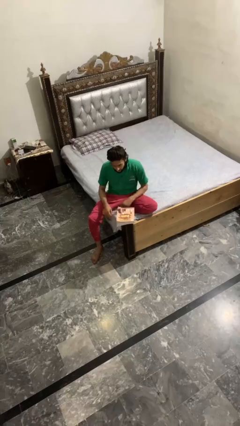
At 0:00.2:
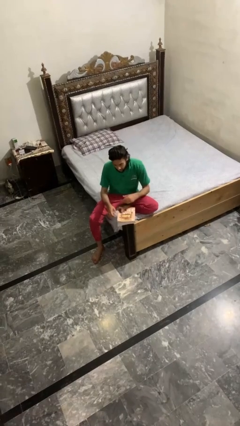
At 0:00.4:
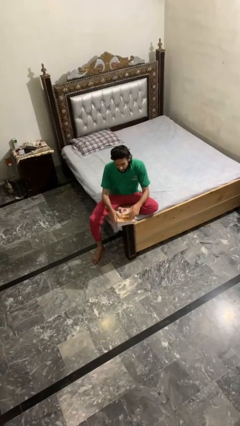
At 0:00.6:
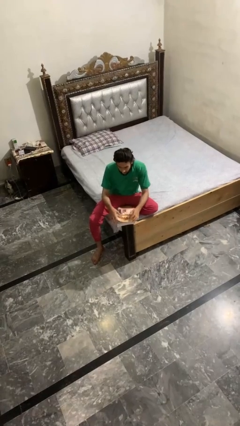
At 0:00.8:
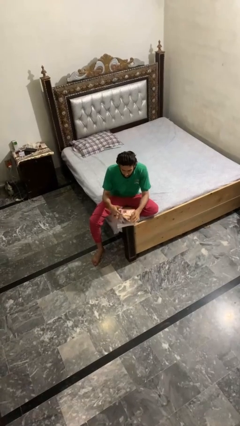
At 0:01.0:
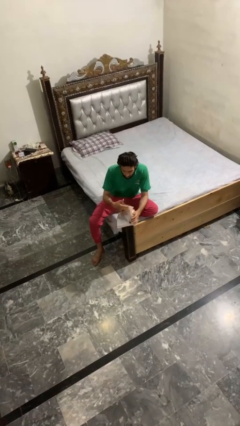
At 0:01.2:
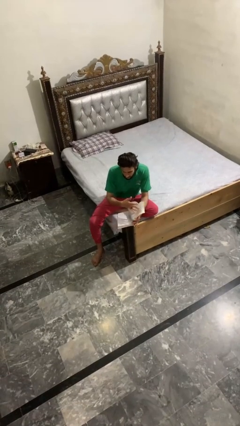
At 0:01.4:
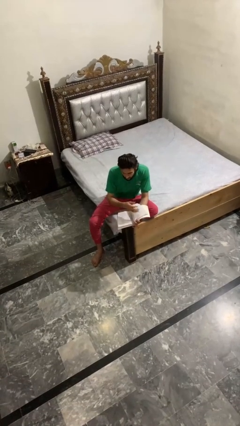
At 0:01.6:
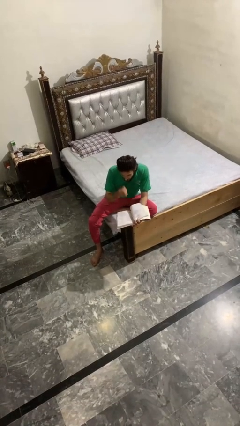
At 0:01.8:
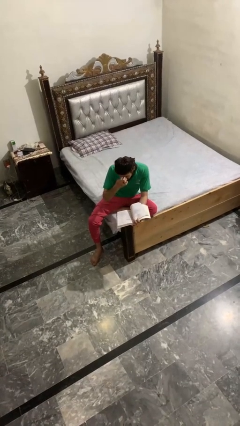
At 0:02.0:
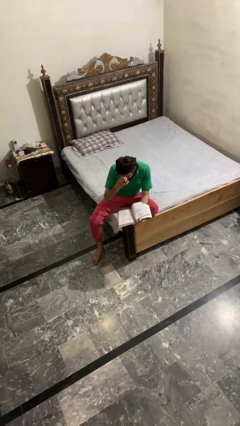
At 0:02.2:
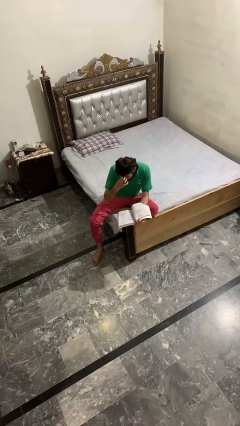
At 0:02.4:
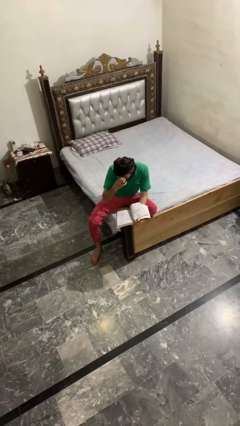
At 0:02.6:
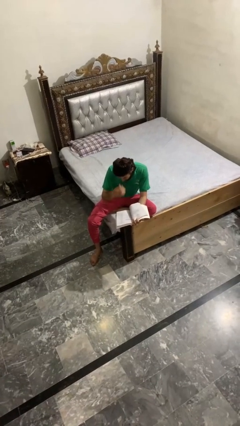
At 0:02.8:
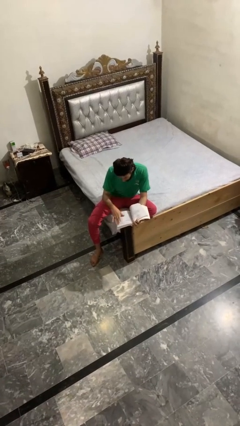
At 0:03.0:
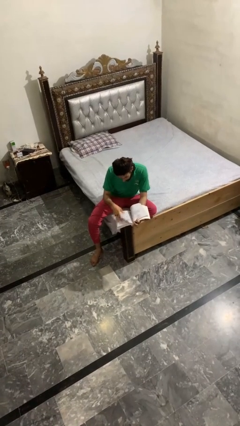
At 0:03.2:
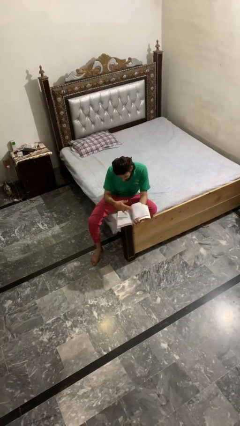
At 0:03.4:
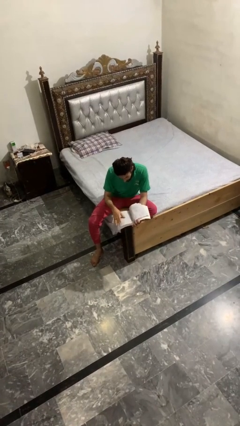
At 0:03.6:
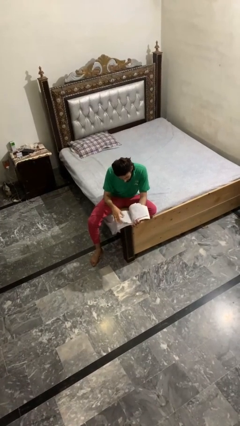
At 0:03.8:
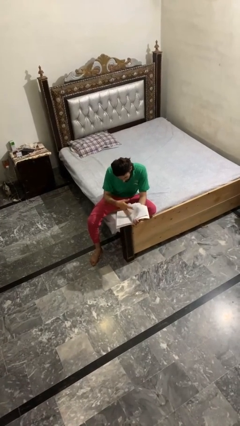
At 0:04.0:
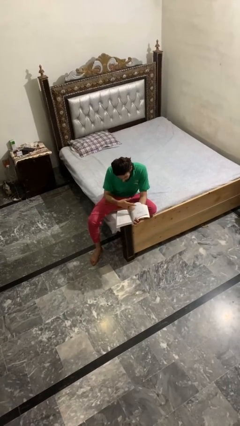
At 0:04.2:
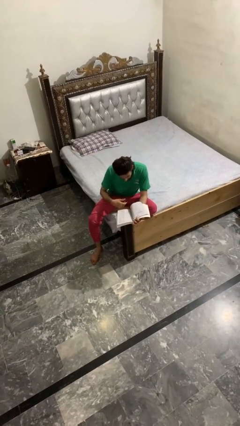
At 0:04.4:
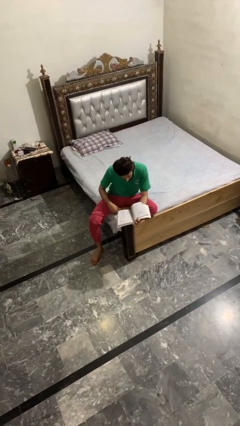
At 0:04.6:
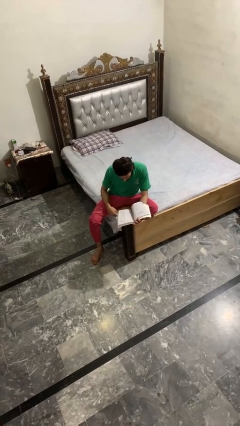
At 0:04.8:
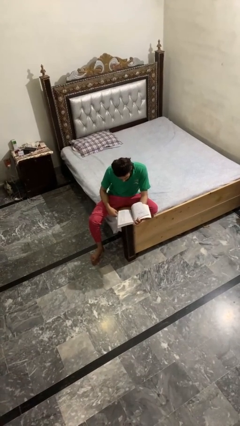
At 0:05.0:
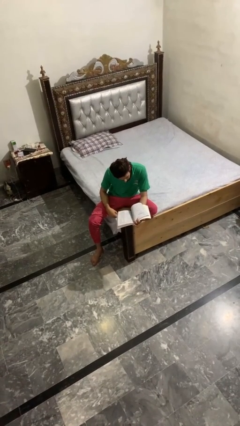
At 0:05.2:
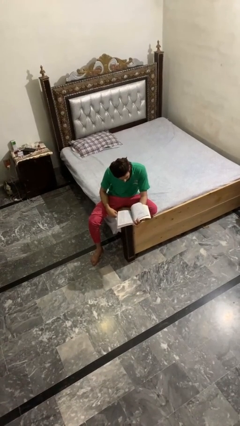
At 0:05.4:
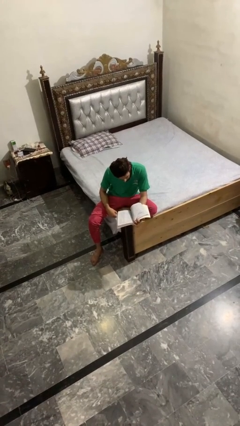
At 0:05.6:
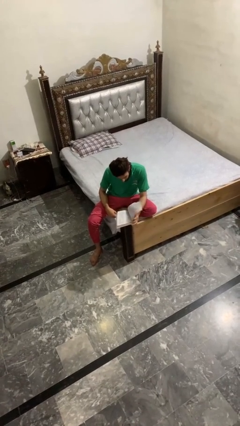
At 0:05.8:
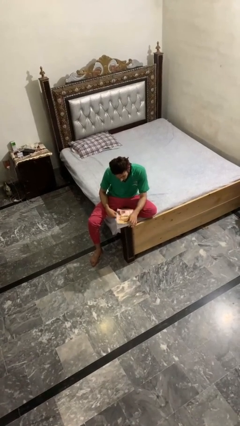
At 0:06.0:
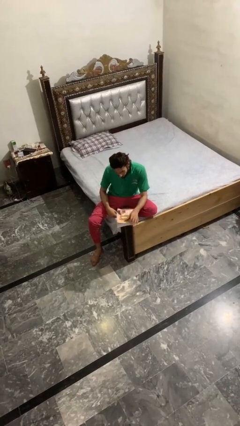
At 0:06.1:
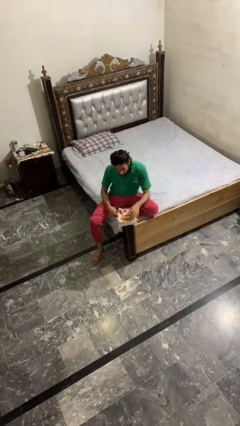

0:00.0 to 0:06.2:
person reads book

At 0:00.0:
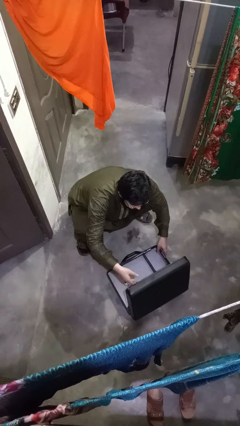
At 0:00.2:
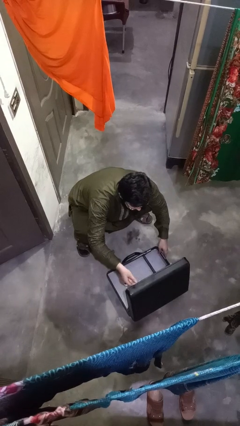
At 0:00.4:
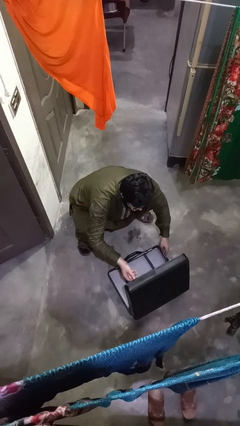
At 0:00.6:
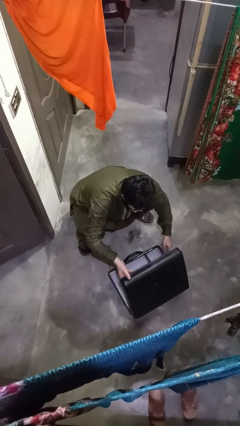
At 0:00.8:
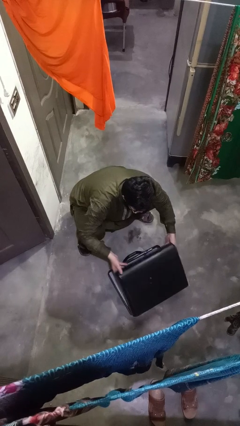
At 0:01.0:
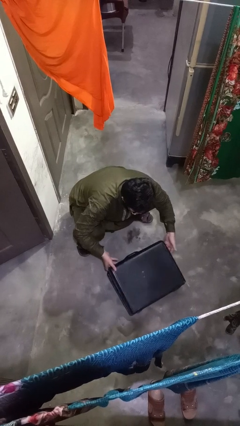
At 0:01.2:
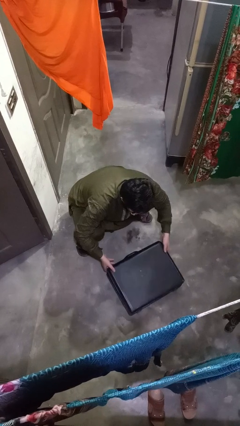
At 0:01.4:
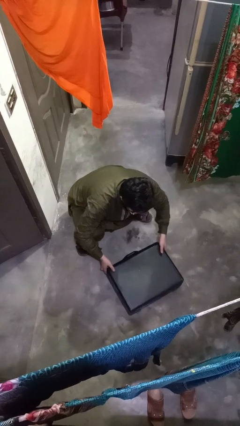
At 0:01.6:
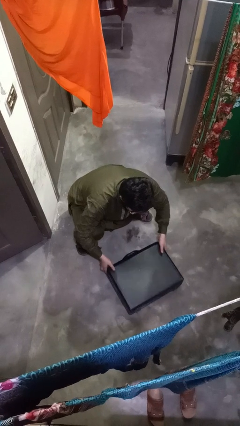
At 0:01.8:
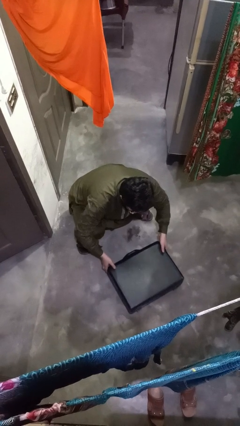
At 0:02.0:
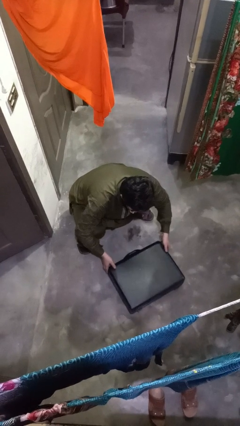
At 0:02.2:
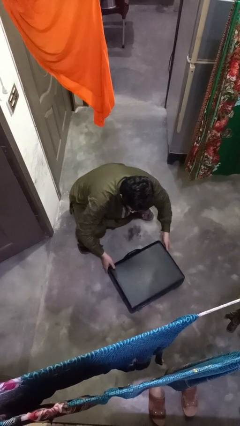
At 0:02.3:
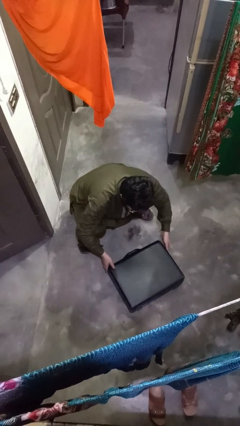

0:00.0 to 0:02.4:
person closes suitcase

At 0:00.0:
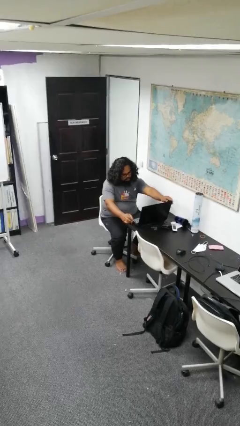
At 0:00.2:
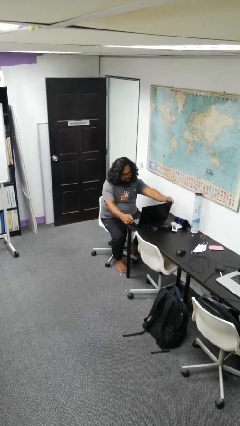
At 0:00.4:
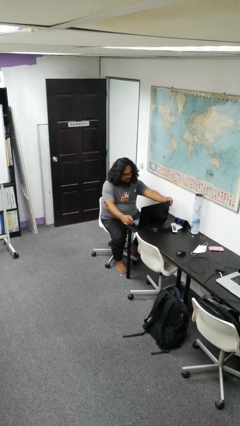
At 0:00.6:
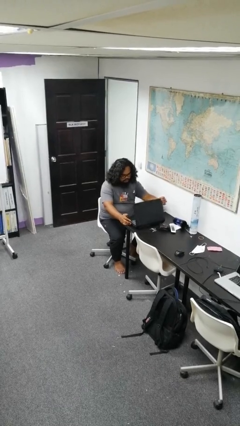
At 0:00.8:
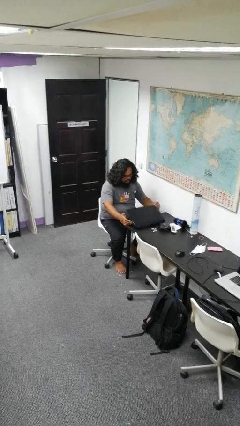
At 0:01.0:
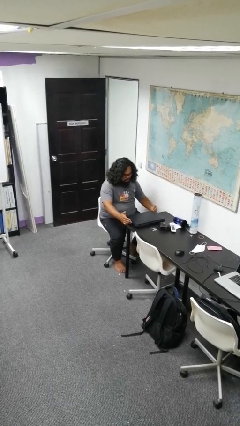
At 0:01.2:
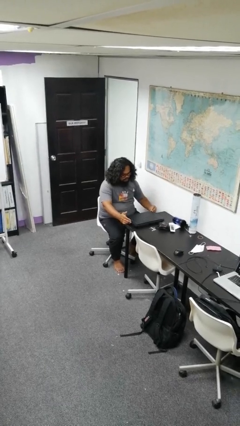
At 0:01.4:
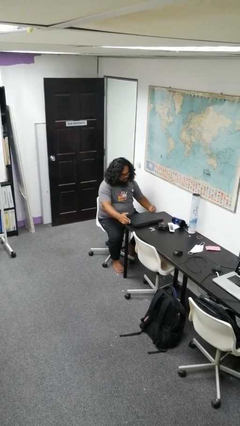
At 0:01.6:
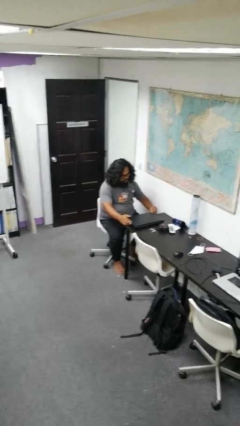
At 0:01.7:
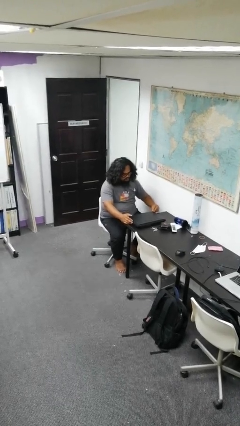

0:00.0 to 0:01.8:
person closes laptop

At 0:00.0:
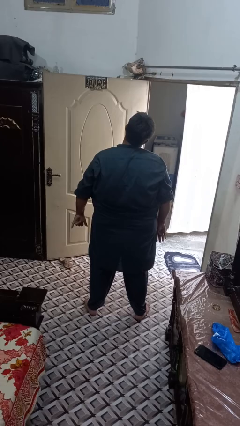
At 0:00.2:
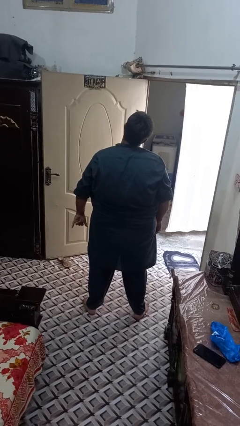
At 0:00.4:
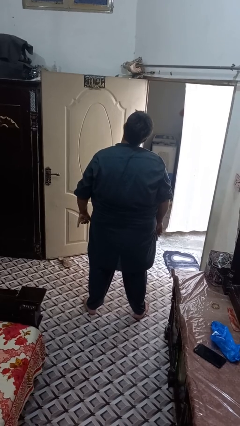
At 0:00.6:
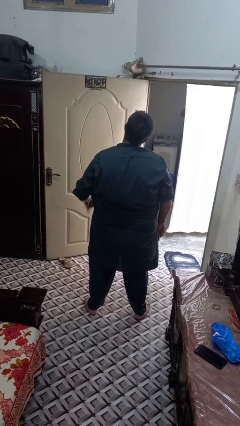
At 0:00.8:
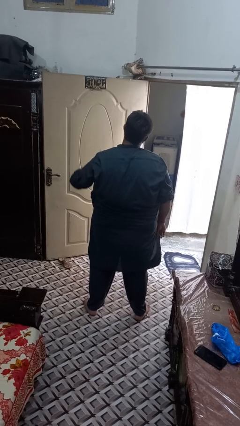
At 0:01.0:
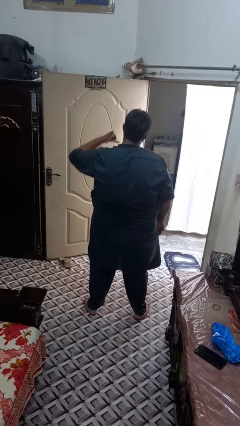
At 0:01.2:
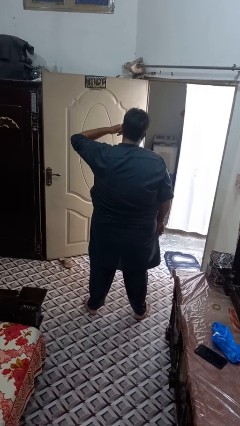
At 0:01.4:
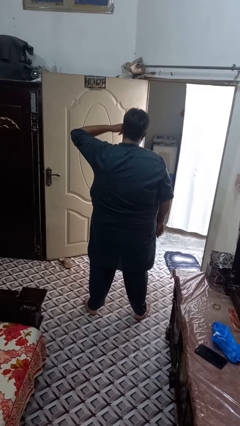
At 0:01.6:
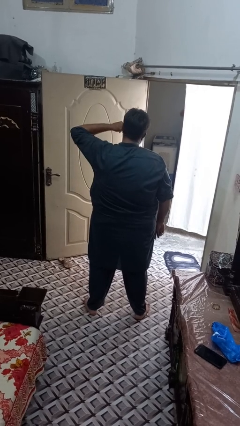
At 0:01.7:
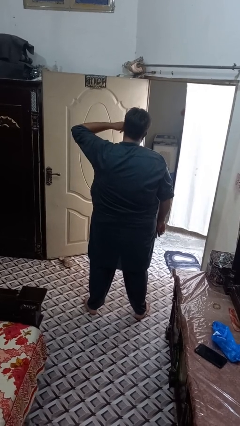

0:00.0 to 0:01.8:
person gestures call me

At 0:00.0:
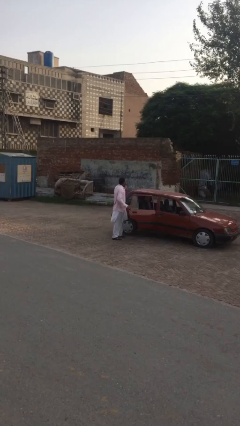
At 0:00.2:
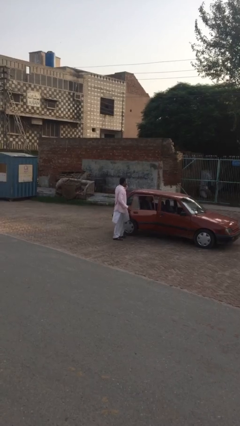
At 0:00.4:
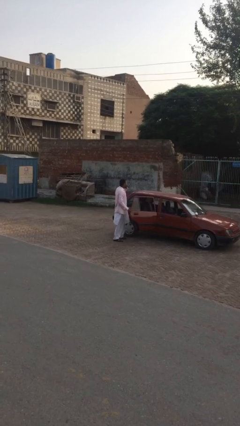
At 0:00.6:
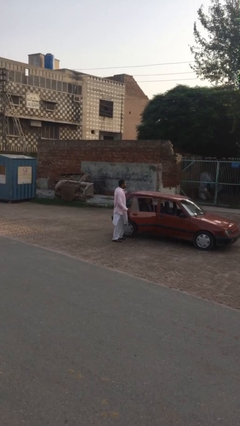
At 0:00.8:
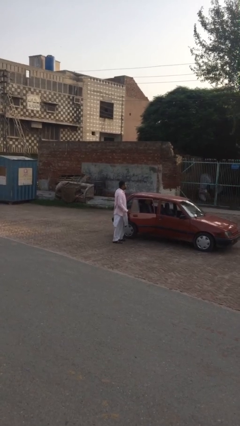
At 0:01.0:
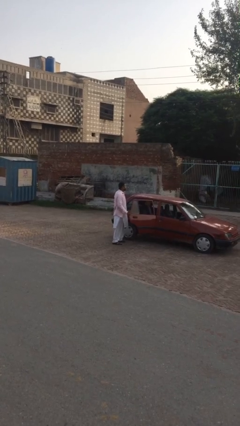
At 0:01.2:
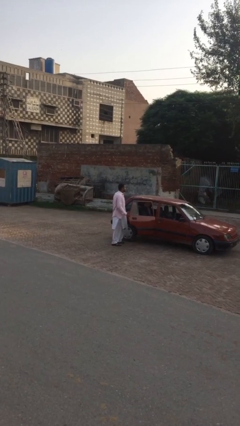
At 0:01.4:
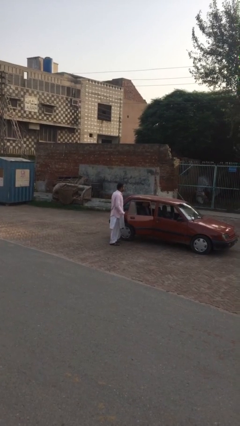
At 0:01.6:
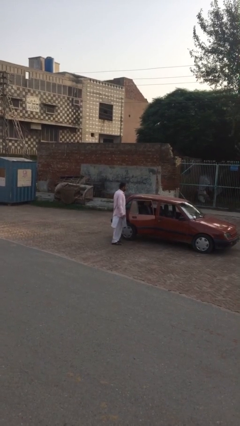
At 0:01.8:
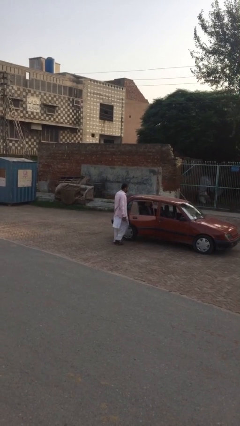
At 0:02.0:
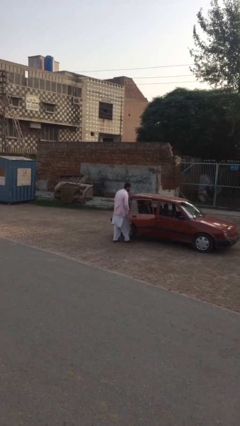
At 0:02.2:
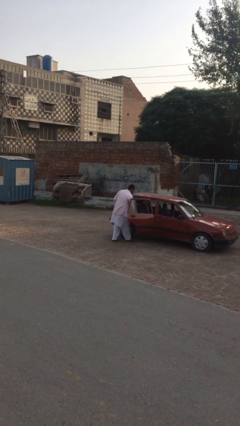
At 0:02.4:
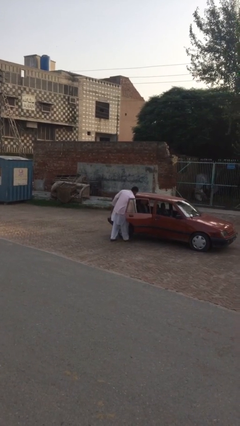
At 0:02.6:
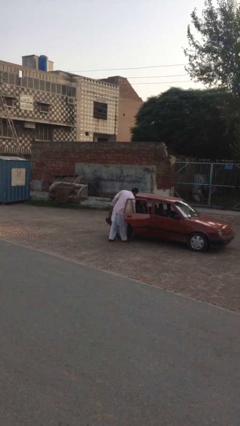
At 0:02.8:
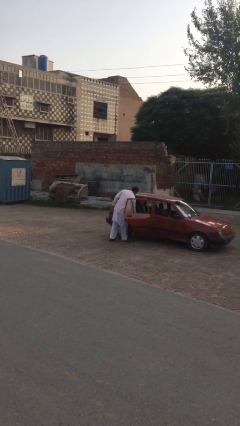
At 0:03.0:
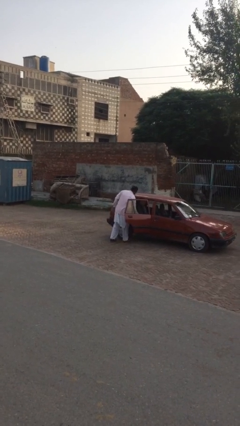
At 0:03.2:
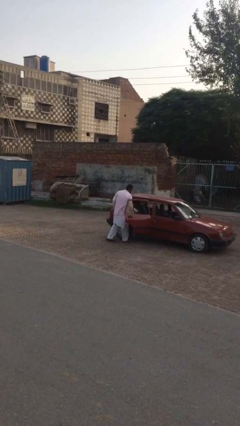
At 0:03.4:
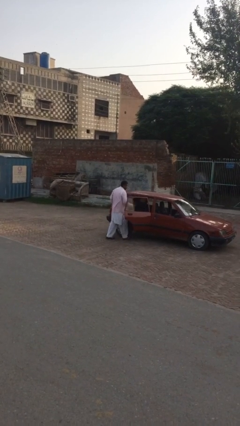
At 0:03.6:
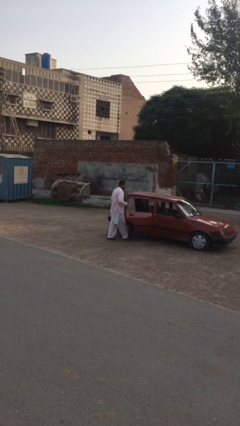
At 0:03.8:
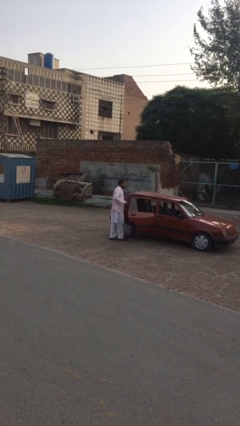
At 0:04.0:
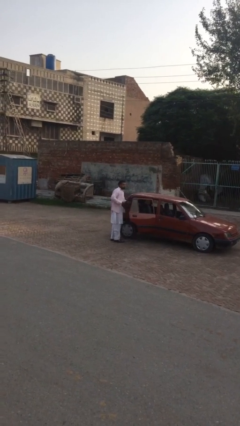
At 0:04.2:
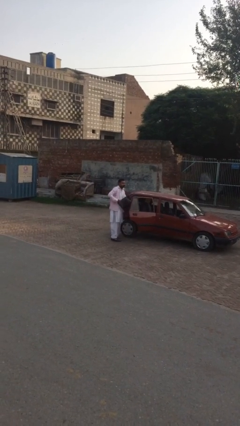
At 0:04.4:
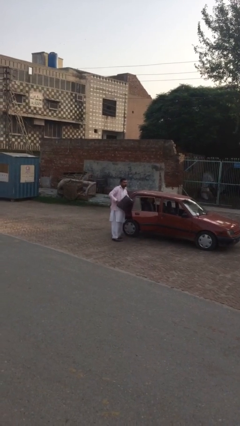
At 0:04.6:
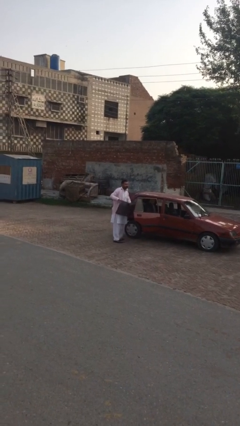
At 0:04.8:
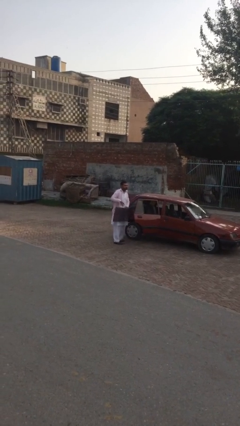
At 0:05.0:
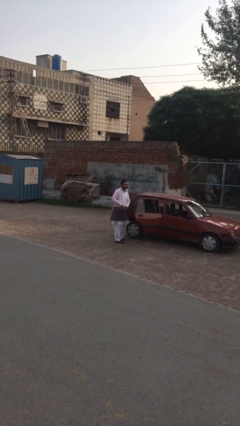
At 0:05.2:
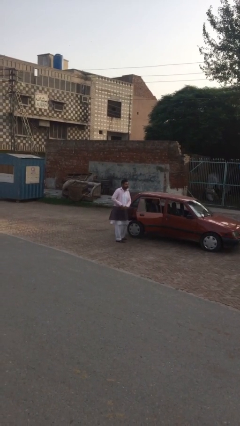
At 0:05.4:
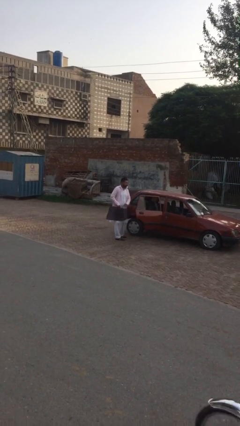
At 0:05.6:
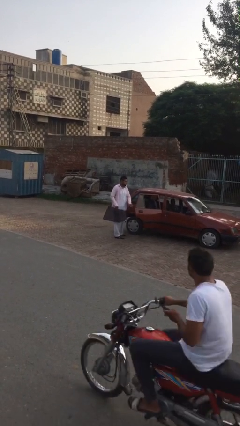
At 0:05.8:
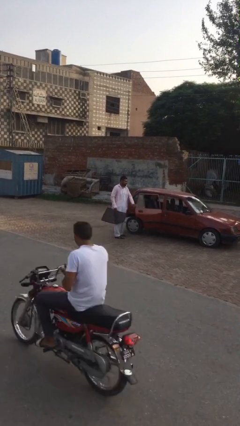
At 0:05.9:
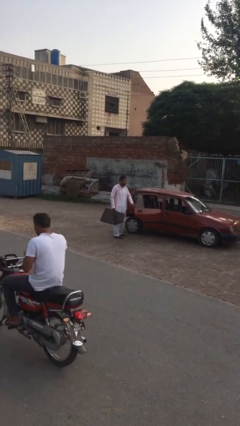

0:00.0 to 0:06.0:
person unloads car
